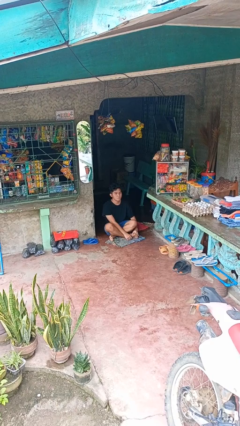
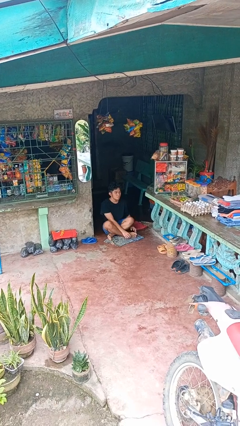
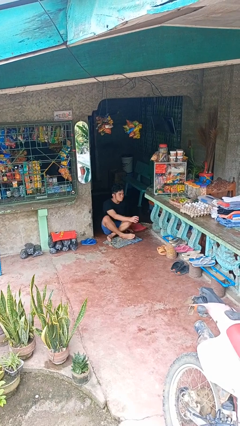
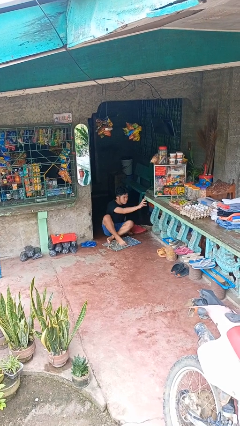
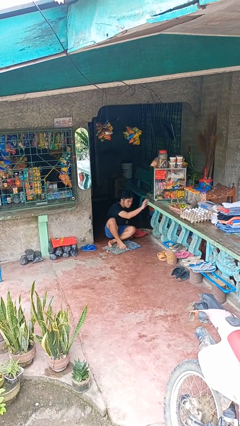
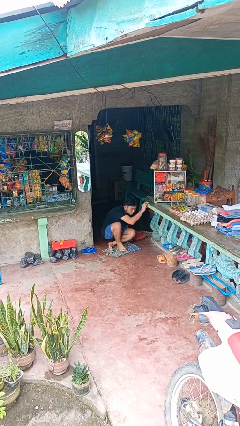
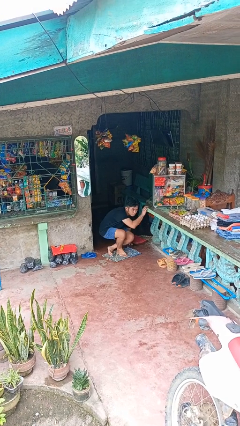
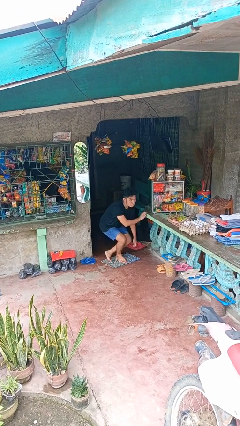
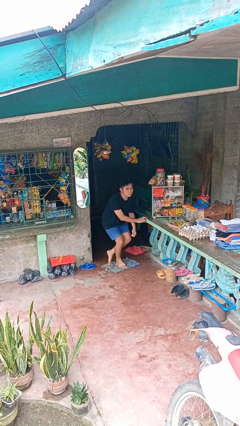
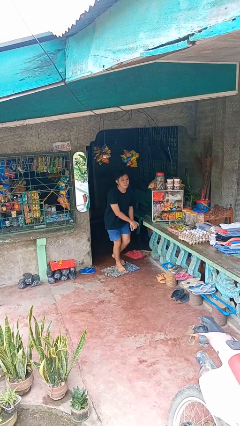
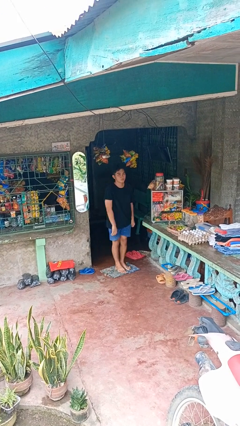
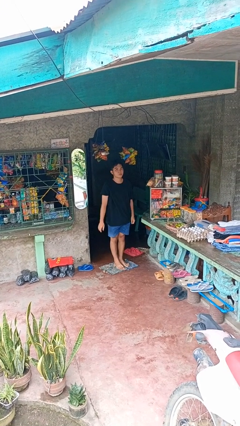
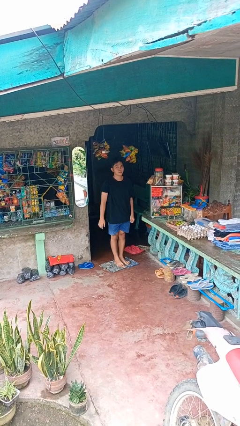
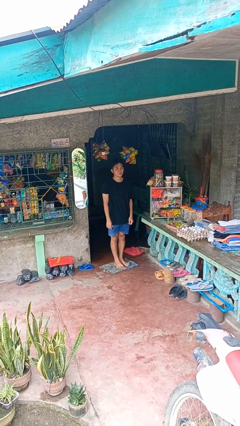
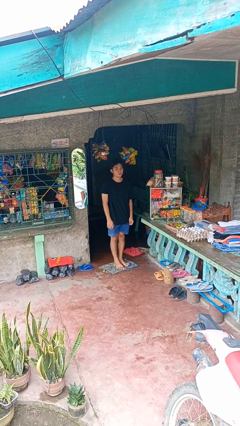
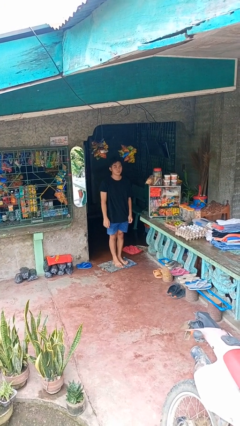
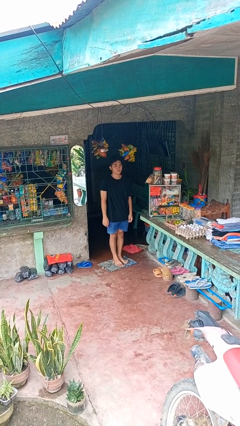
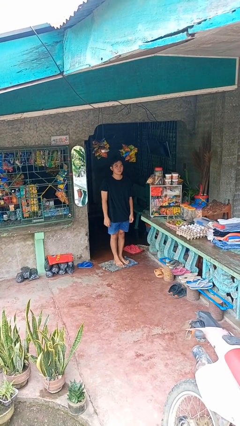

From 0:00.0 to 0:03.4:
person stands up from floor

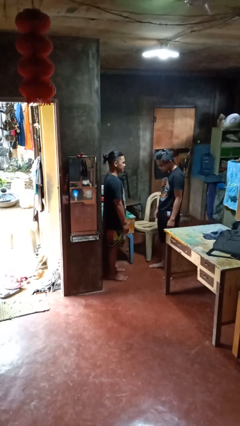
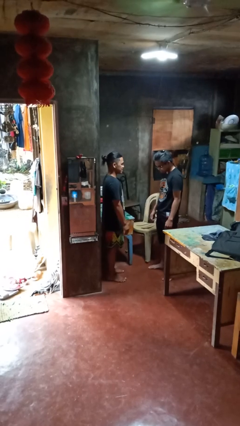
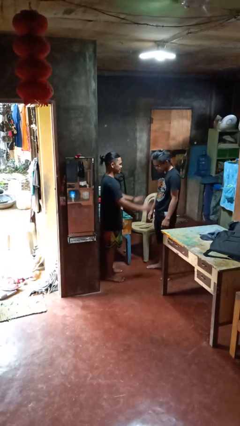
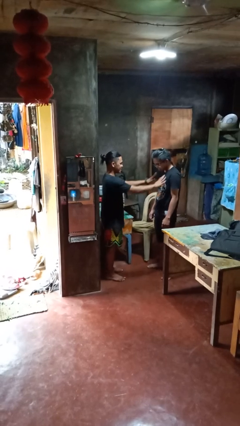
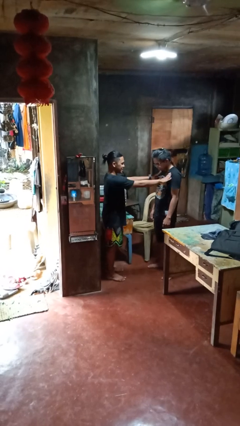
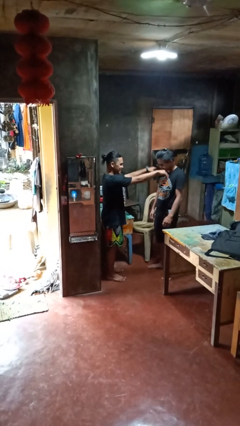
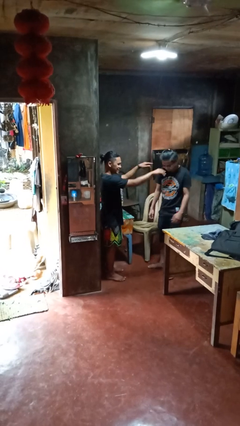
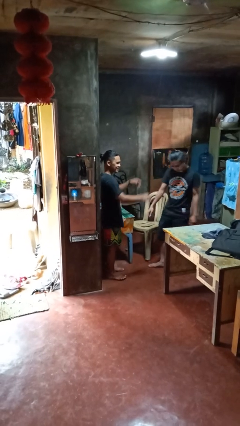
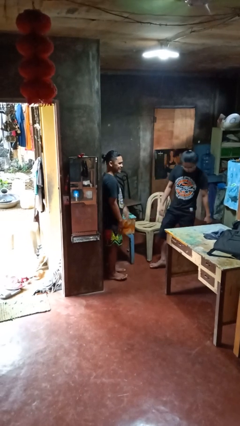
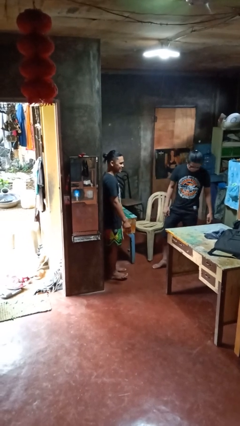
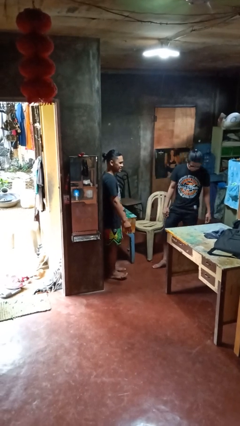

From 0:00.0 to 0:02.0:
person shoves person

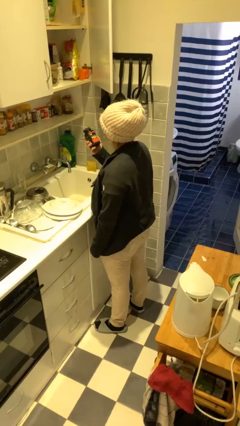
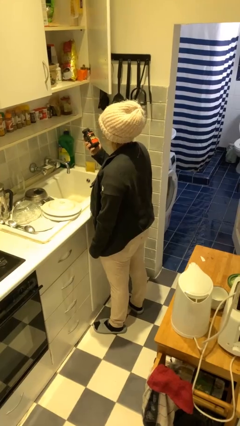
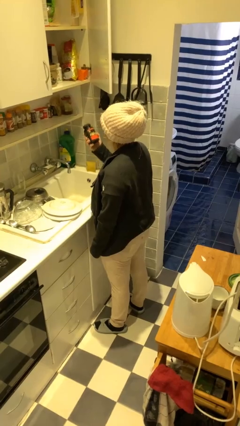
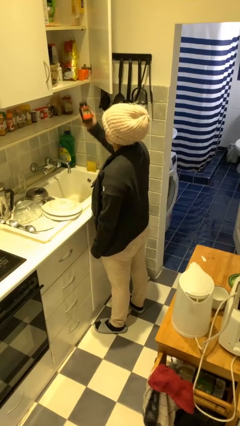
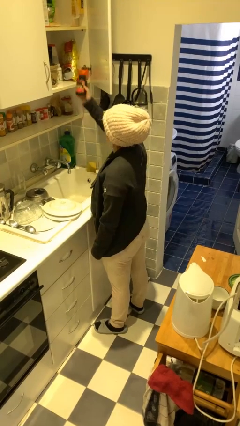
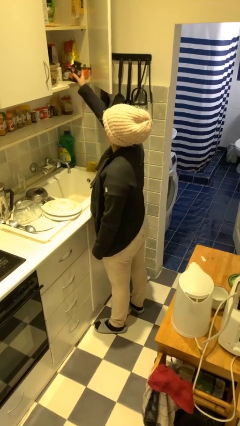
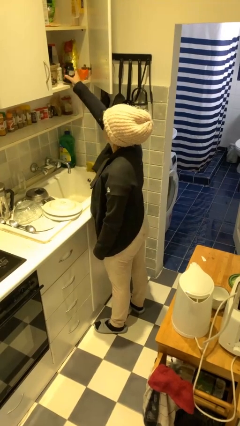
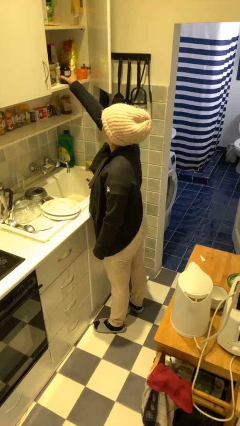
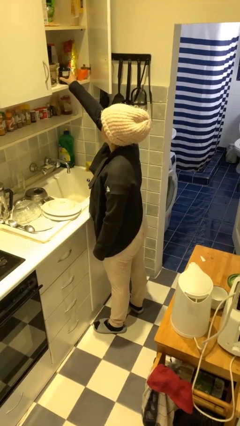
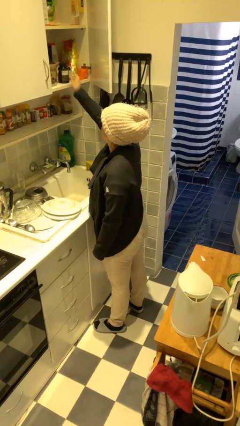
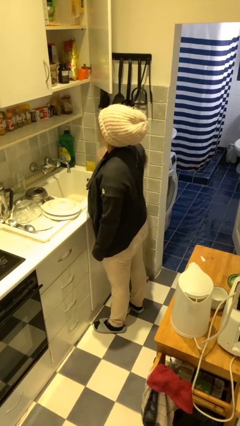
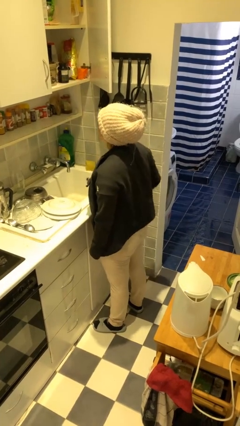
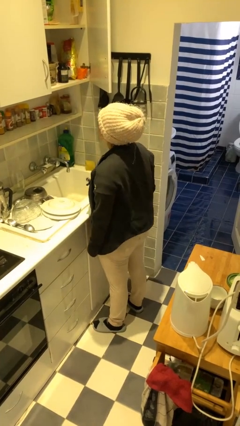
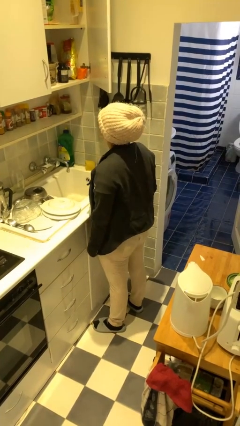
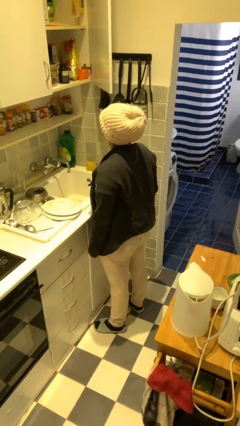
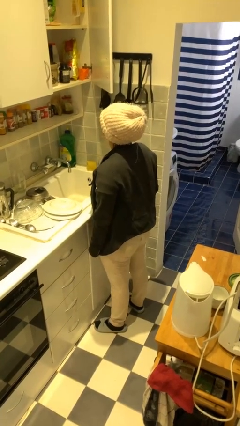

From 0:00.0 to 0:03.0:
person puts down object into cabinet

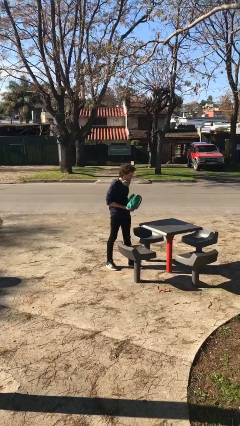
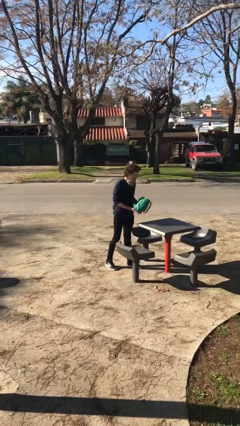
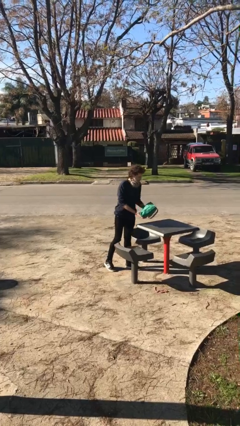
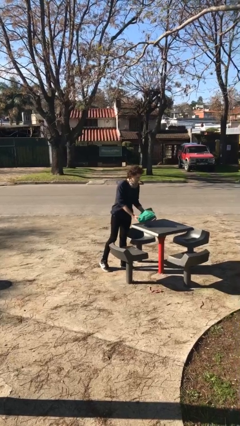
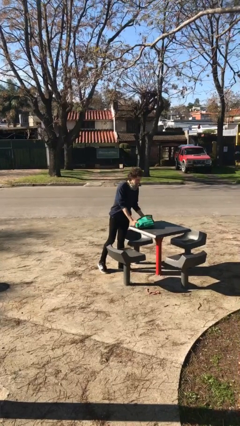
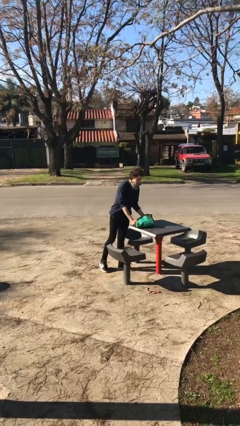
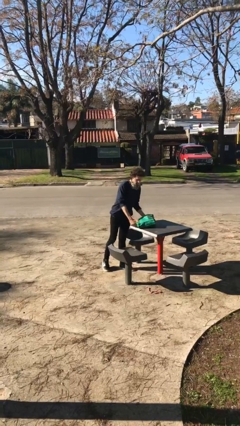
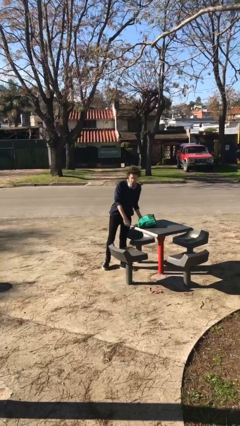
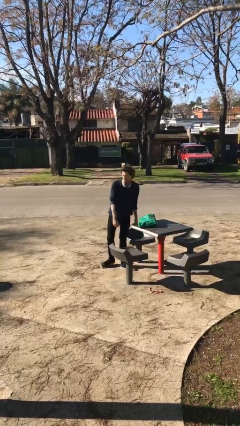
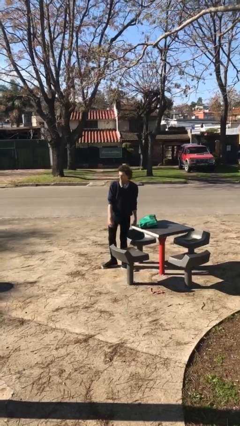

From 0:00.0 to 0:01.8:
person puts down object on table

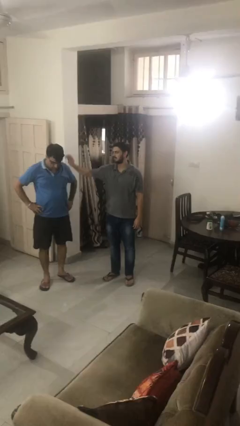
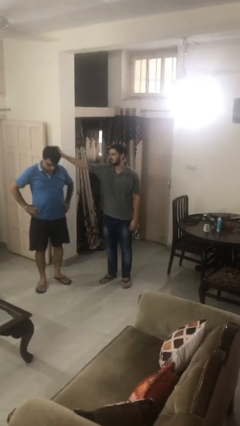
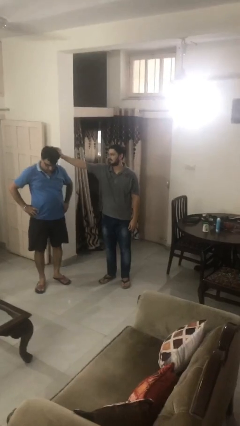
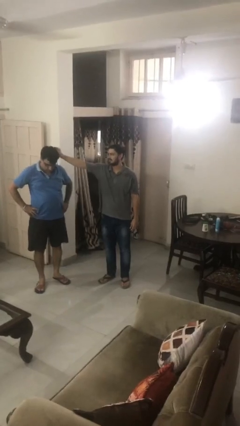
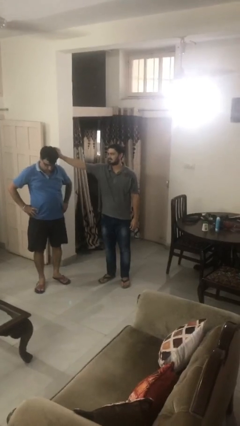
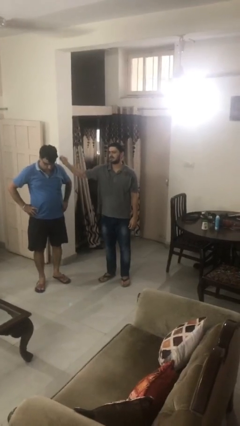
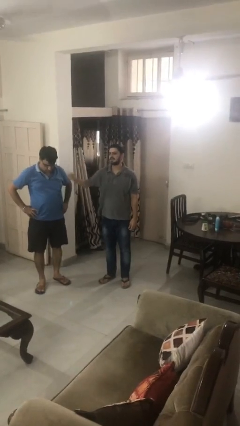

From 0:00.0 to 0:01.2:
person grabs person by hair

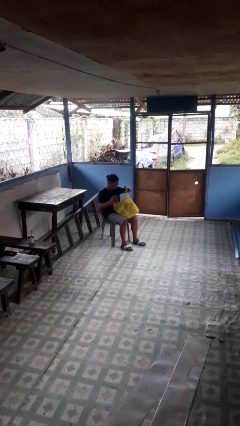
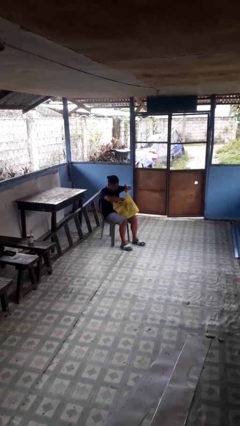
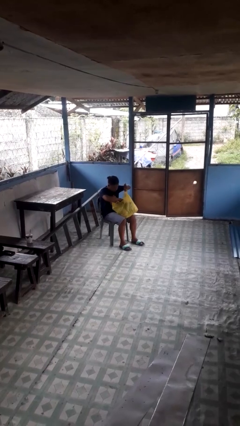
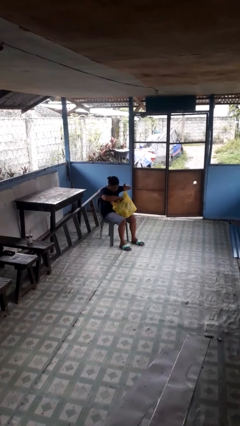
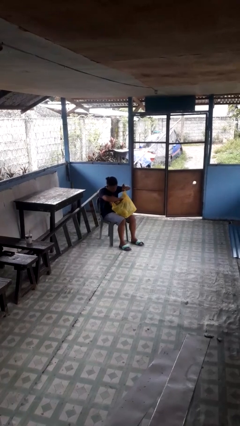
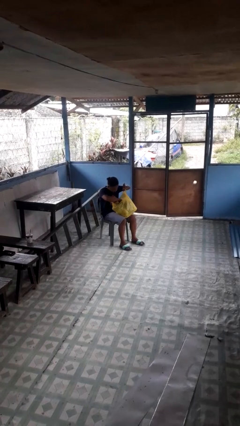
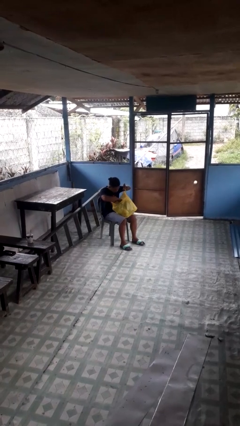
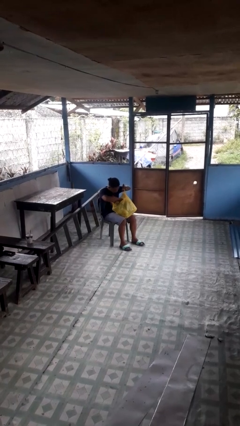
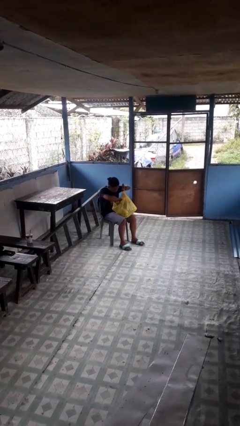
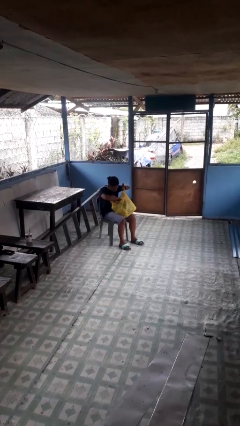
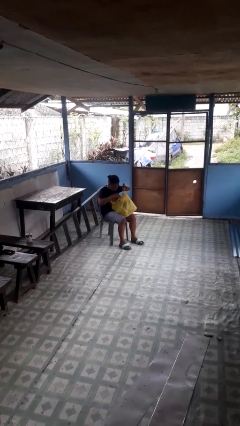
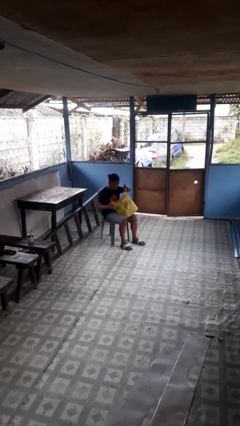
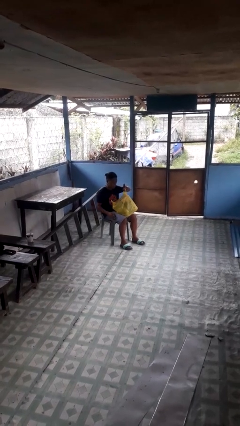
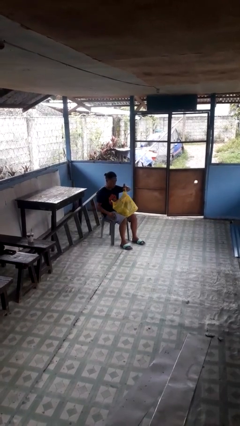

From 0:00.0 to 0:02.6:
person searches in bag

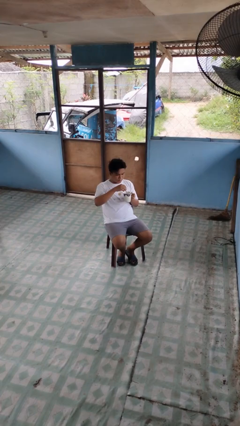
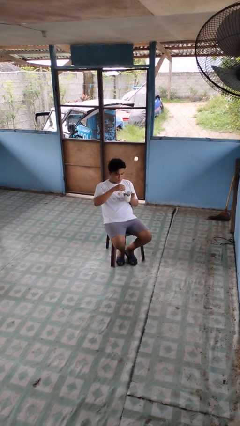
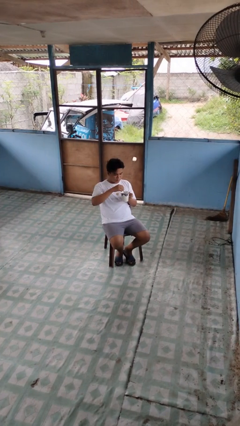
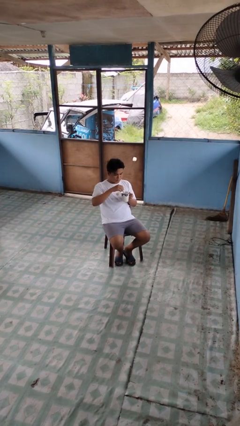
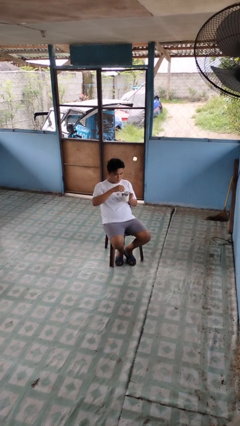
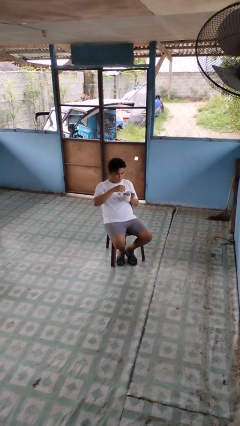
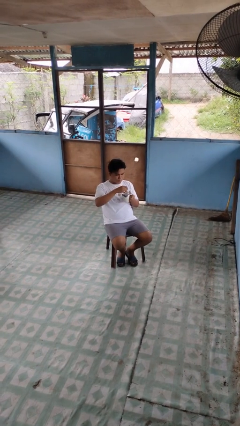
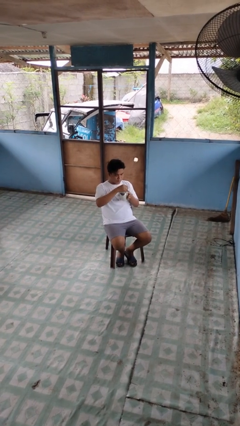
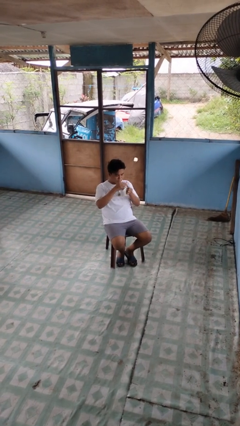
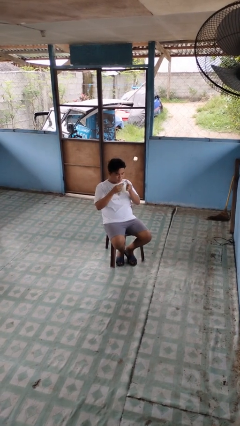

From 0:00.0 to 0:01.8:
person stirs mug

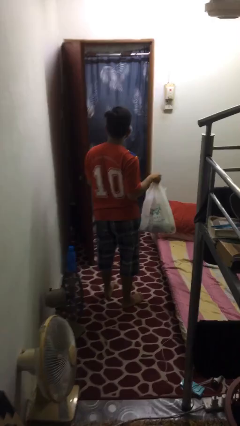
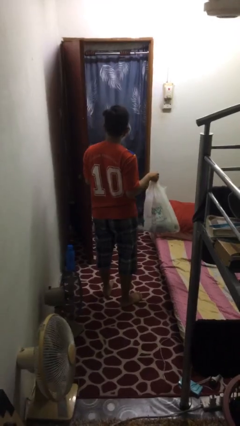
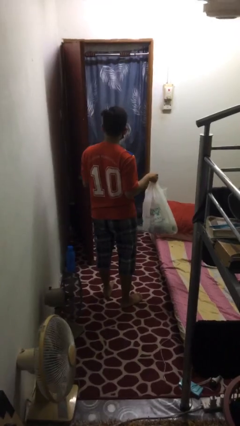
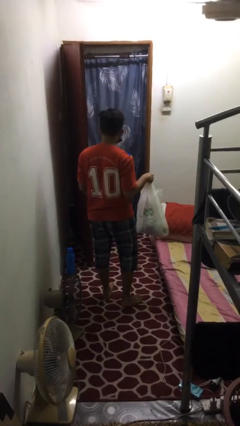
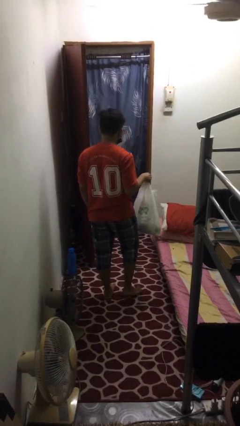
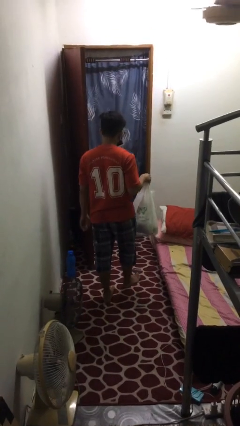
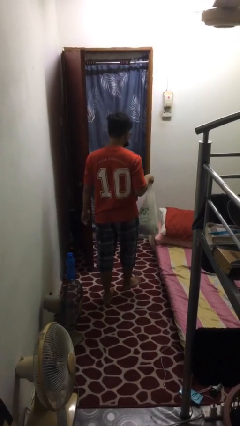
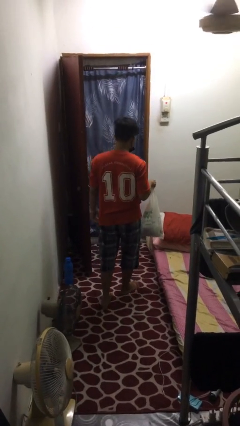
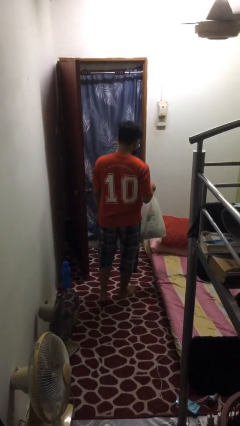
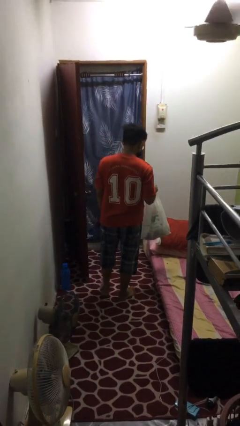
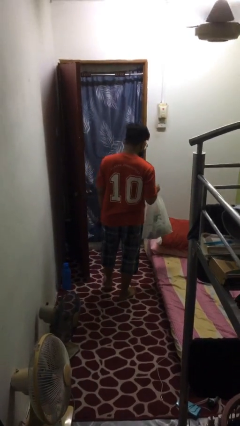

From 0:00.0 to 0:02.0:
person carries groceries
